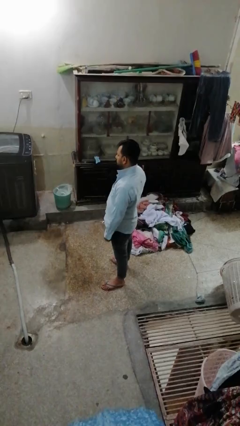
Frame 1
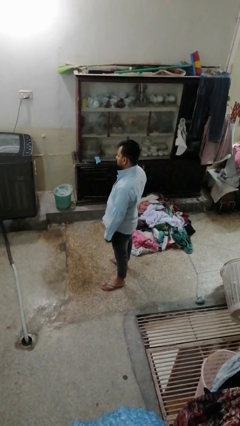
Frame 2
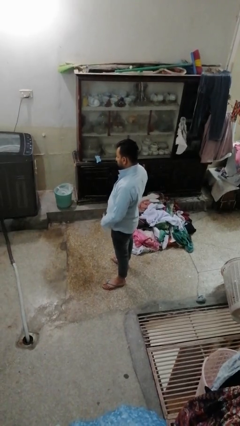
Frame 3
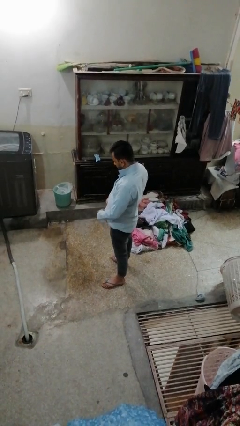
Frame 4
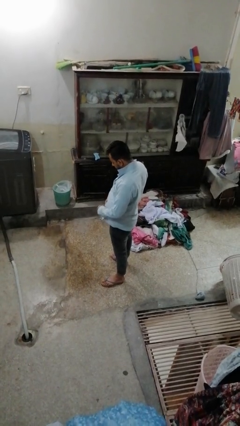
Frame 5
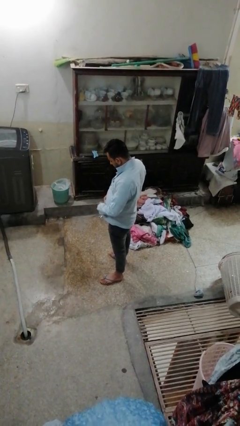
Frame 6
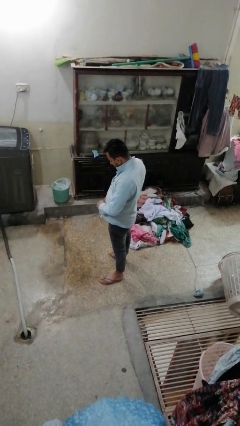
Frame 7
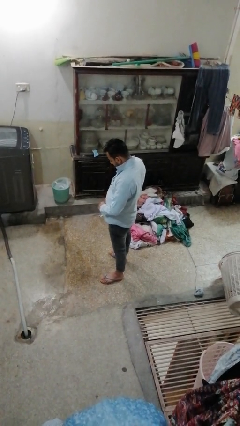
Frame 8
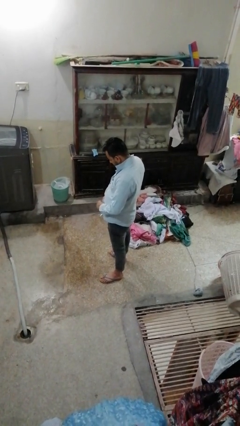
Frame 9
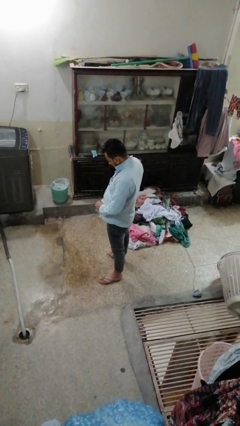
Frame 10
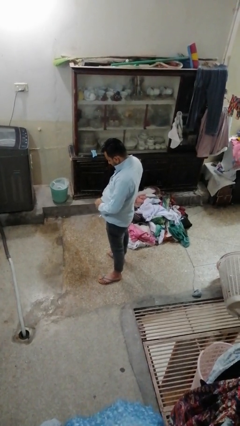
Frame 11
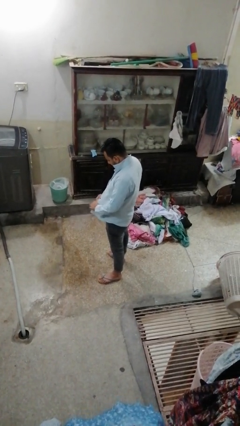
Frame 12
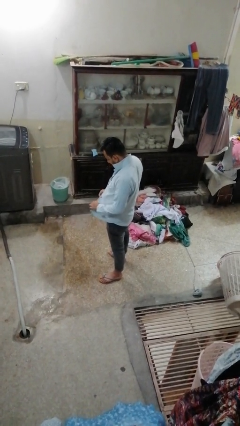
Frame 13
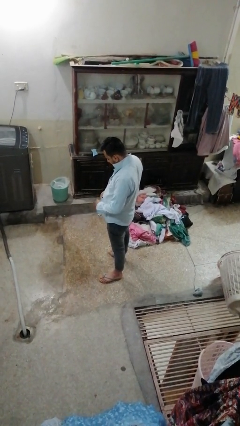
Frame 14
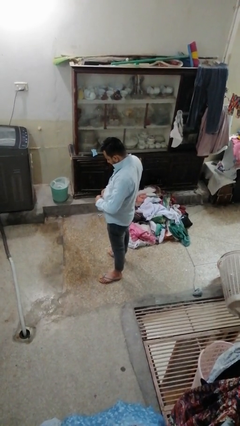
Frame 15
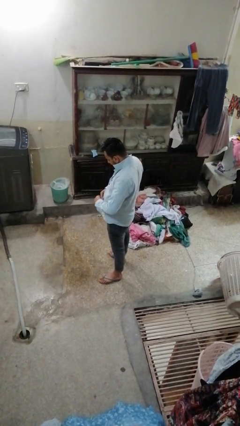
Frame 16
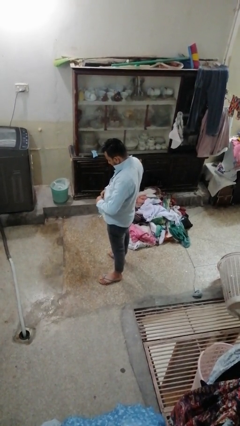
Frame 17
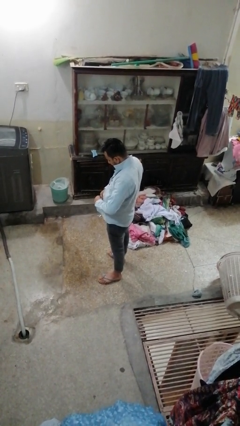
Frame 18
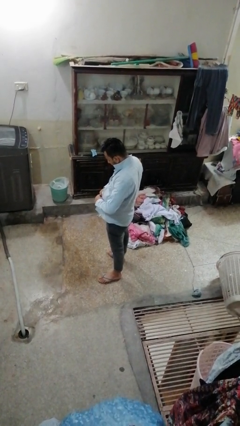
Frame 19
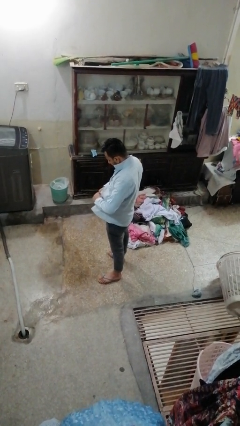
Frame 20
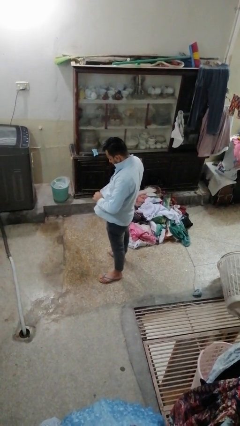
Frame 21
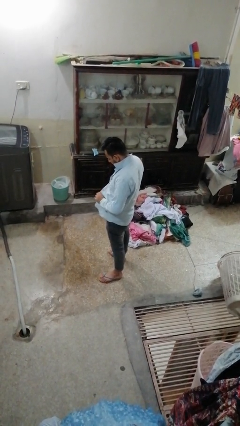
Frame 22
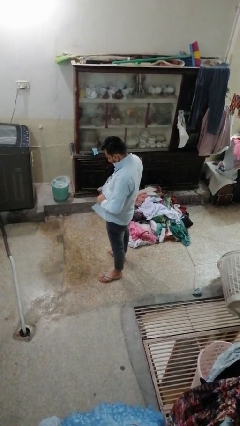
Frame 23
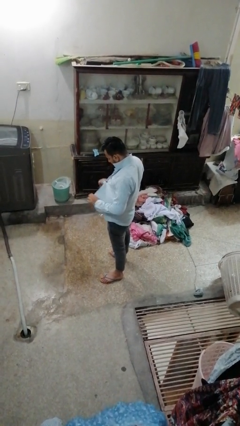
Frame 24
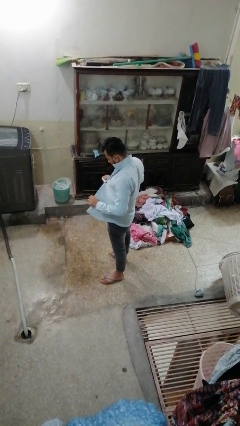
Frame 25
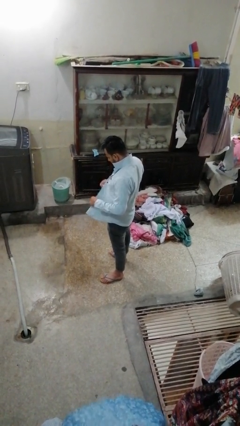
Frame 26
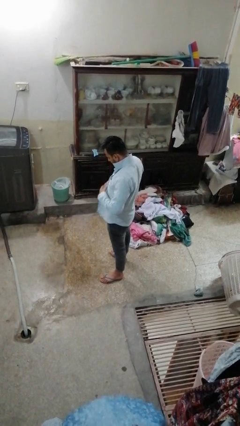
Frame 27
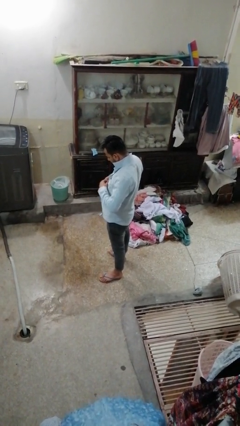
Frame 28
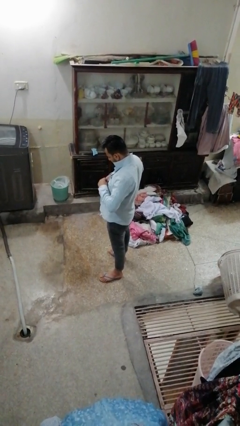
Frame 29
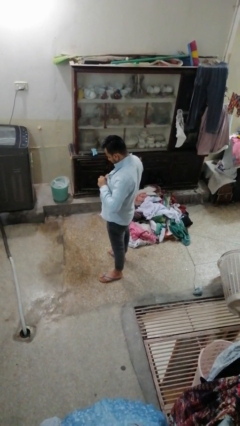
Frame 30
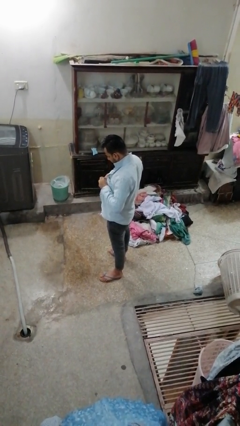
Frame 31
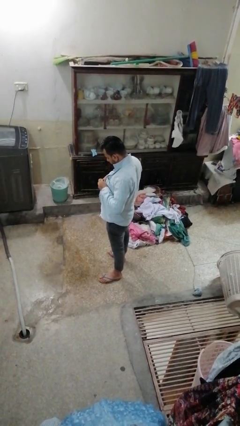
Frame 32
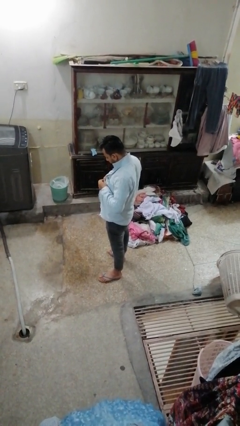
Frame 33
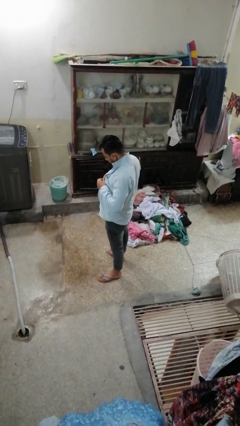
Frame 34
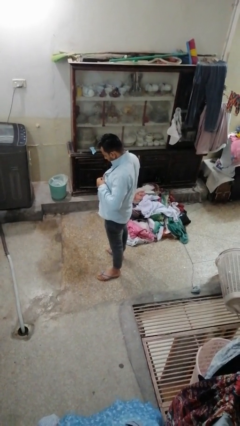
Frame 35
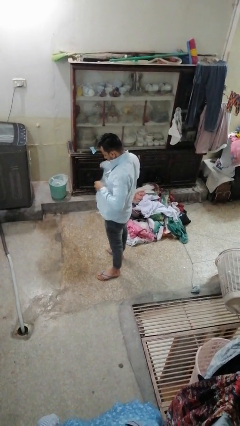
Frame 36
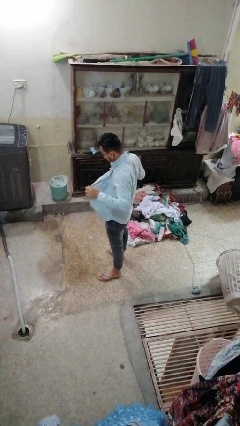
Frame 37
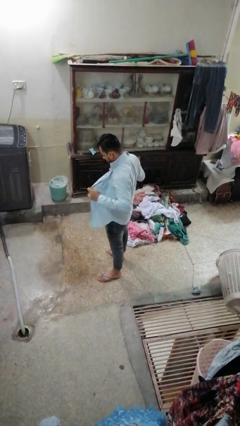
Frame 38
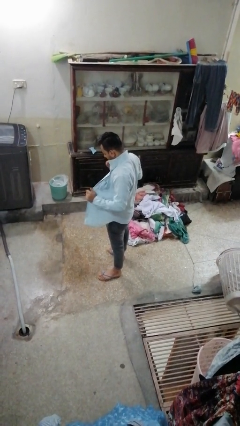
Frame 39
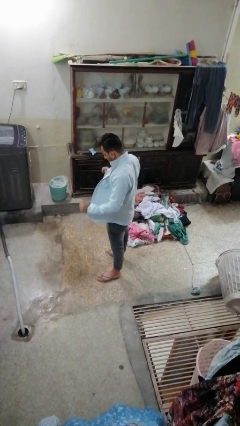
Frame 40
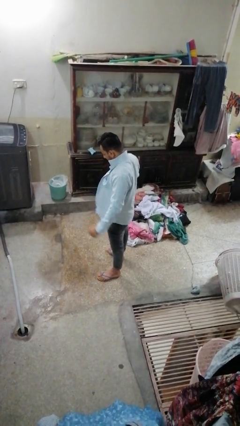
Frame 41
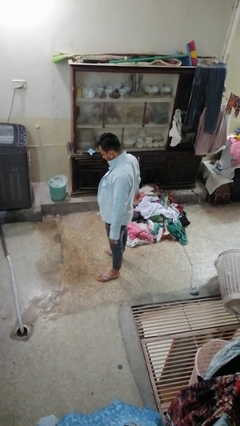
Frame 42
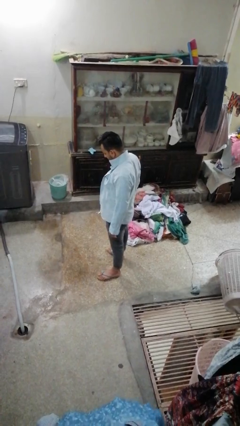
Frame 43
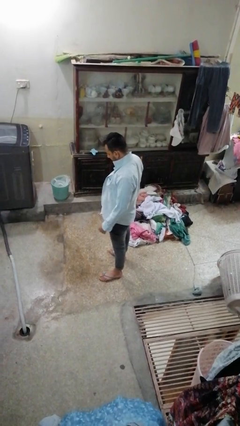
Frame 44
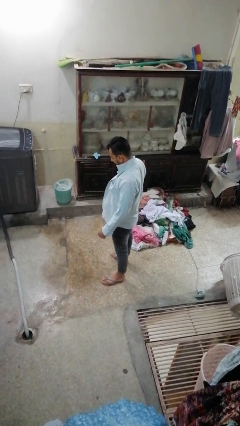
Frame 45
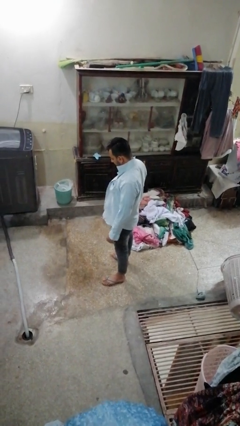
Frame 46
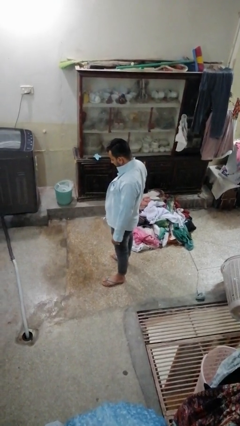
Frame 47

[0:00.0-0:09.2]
person unbuttons shirt

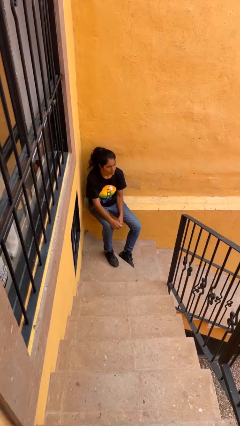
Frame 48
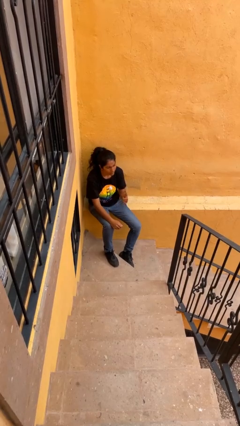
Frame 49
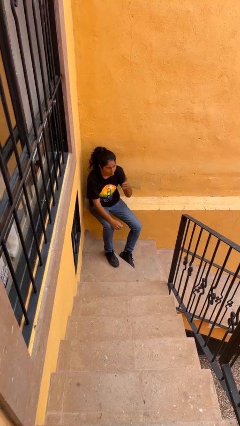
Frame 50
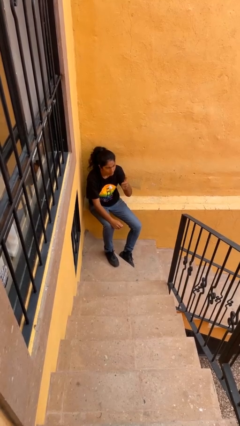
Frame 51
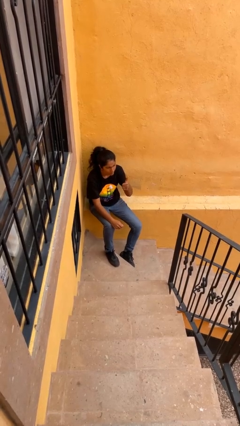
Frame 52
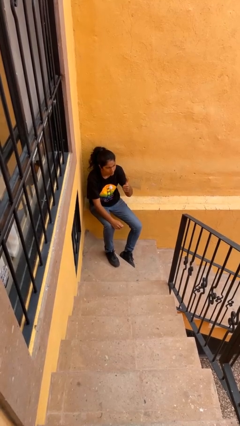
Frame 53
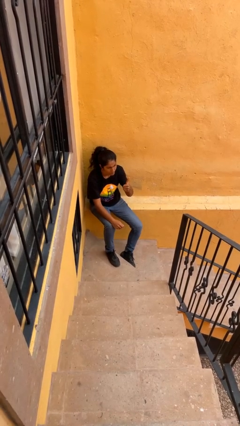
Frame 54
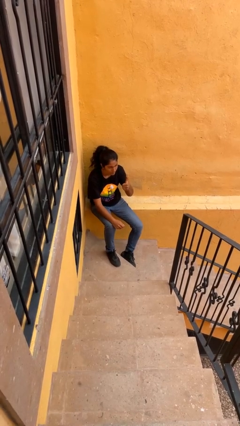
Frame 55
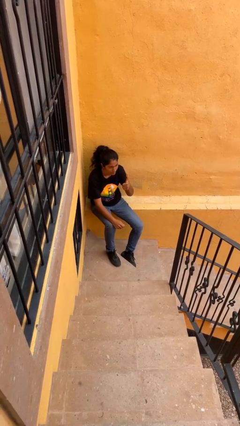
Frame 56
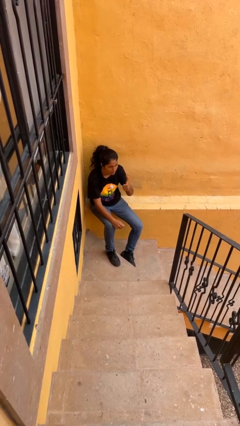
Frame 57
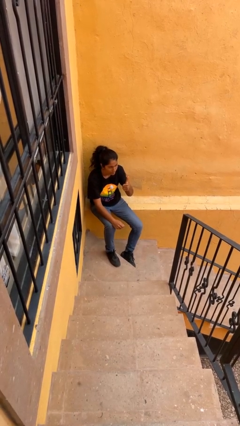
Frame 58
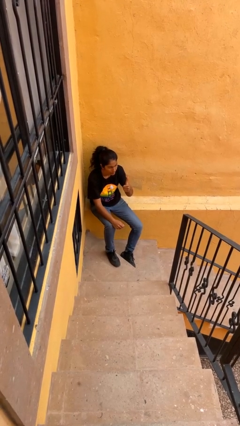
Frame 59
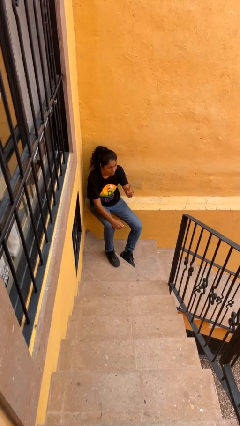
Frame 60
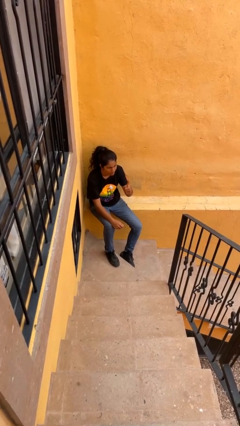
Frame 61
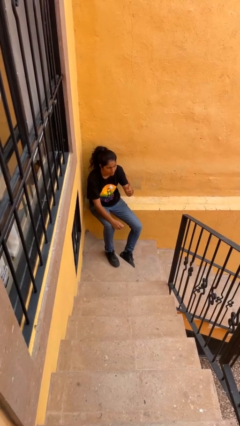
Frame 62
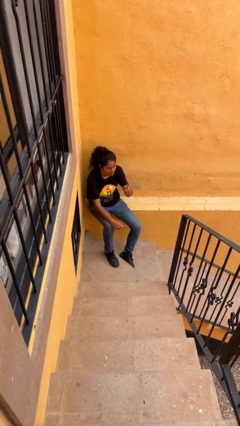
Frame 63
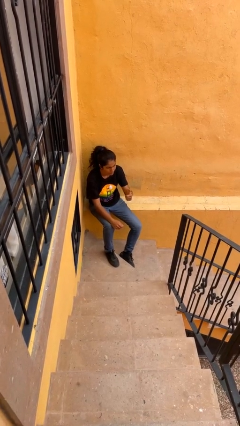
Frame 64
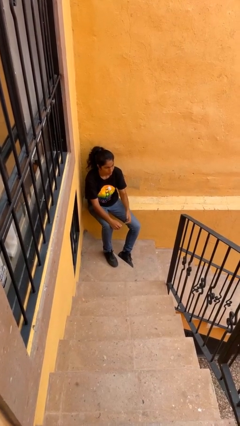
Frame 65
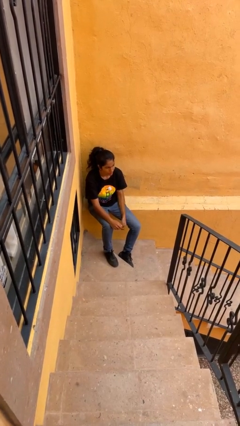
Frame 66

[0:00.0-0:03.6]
person gestures thumbs up

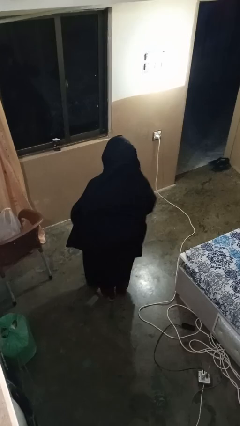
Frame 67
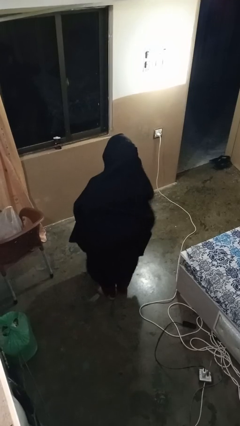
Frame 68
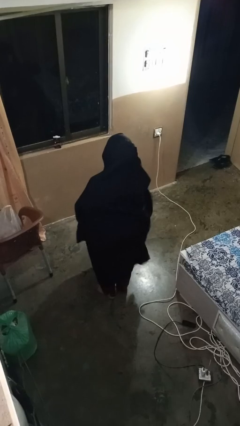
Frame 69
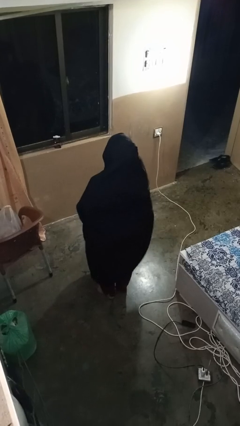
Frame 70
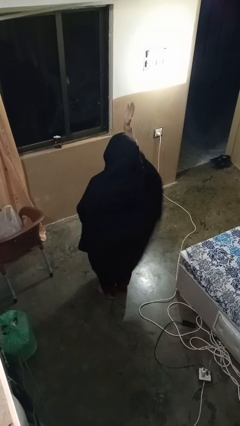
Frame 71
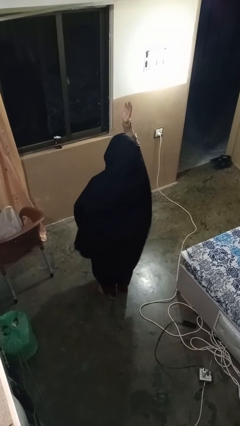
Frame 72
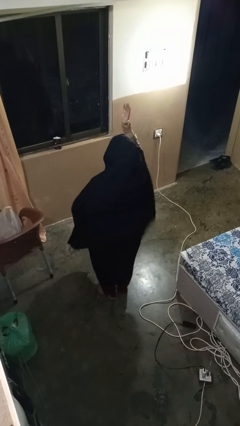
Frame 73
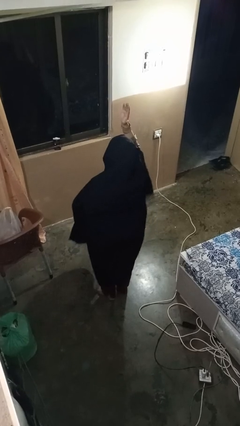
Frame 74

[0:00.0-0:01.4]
person gestures raise hand

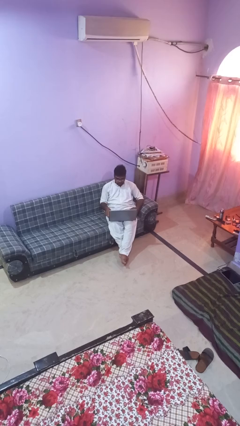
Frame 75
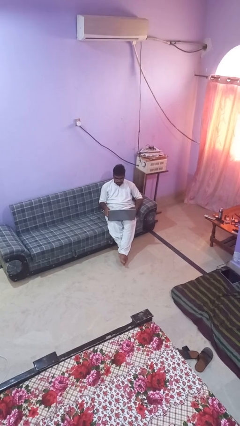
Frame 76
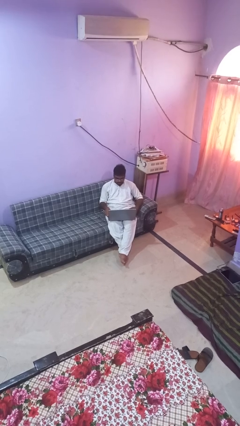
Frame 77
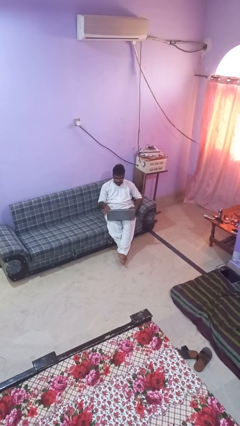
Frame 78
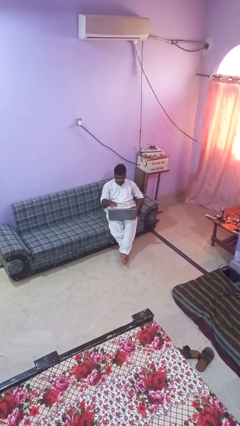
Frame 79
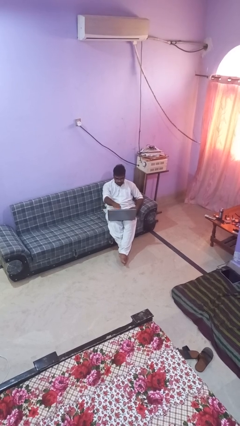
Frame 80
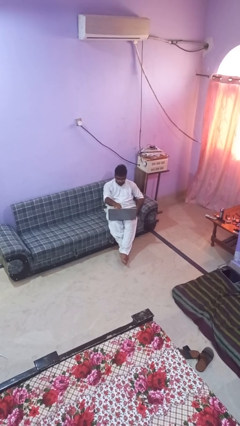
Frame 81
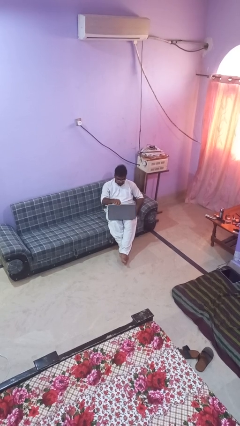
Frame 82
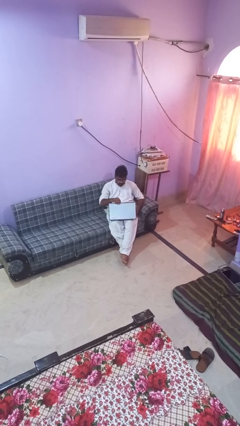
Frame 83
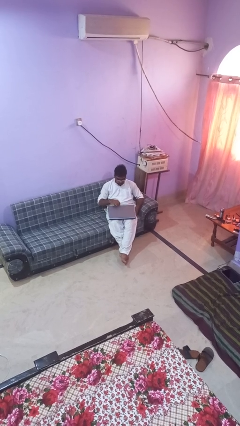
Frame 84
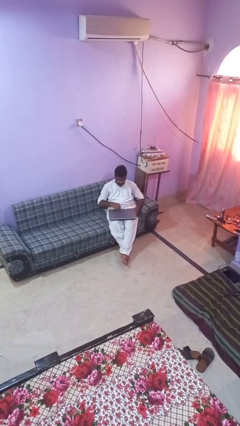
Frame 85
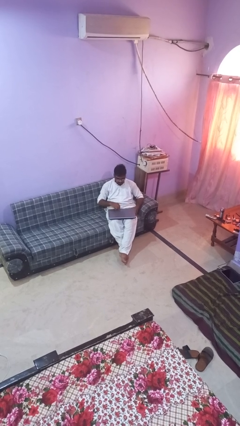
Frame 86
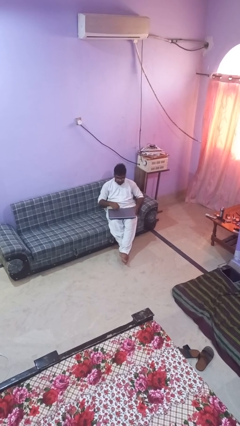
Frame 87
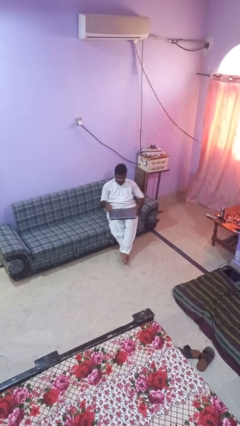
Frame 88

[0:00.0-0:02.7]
person closes laptop

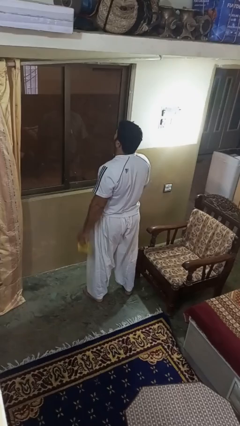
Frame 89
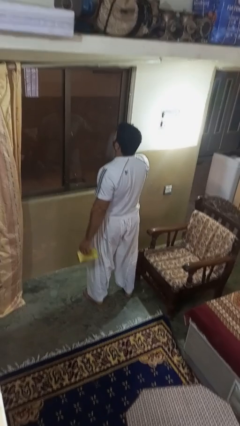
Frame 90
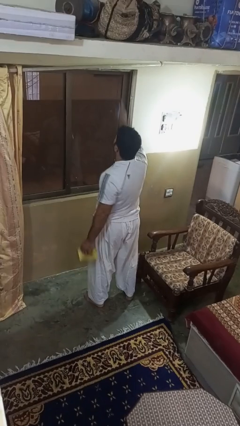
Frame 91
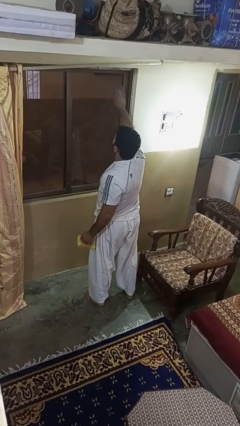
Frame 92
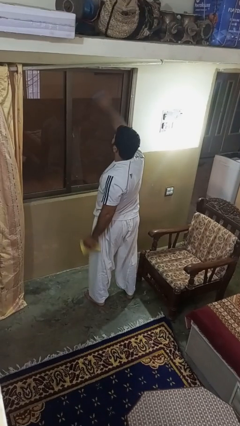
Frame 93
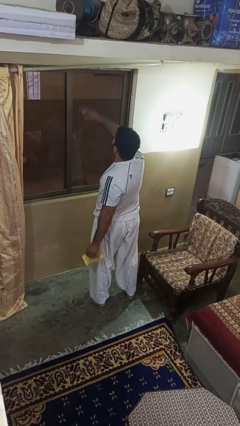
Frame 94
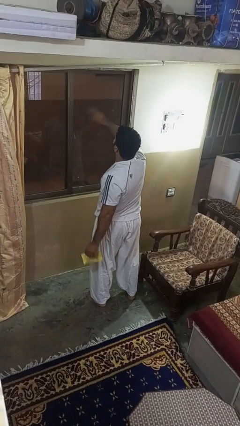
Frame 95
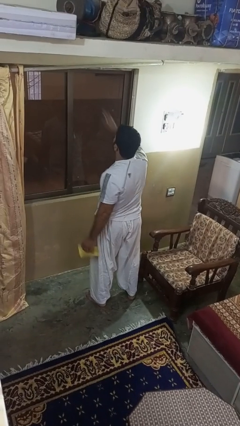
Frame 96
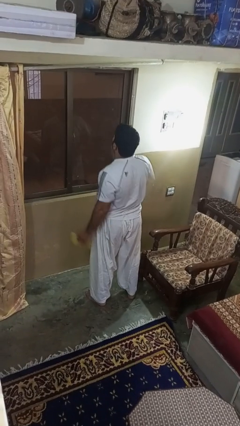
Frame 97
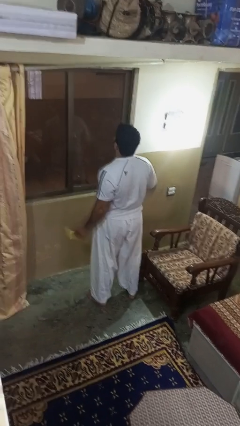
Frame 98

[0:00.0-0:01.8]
person sprays from bottle
